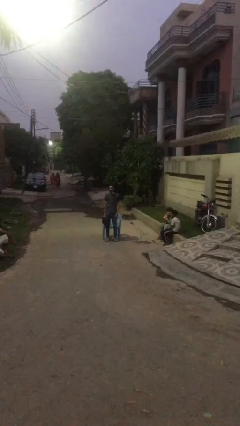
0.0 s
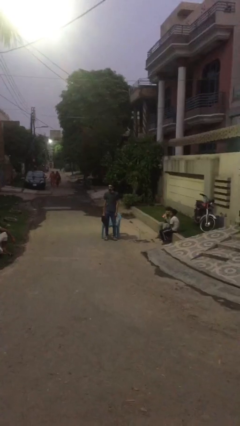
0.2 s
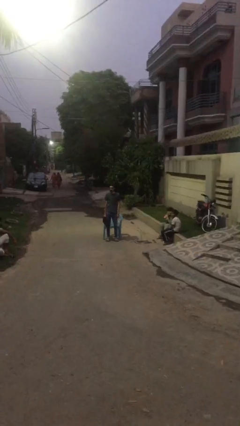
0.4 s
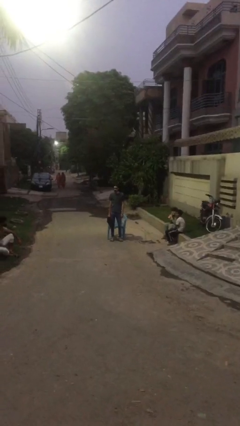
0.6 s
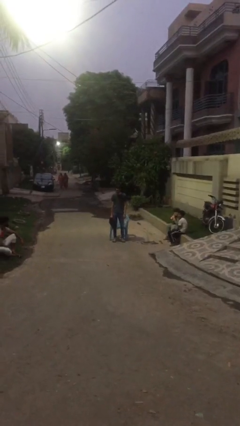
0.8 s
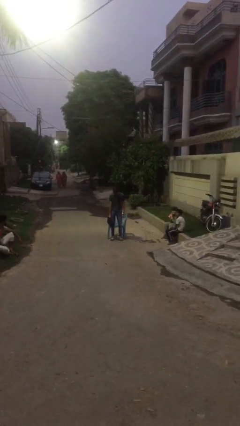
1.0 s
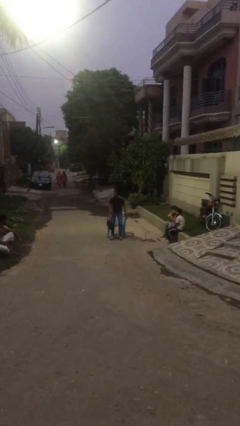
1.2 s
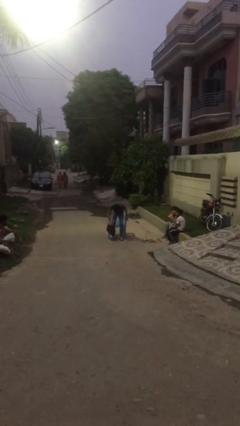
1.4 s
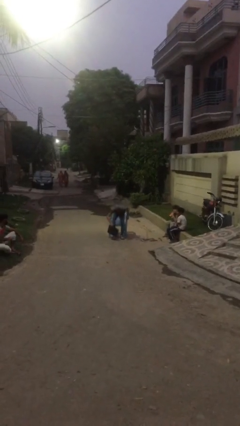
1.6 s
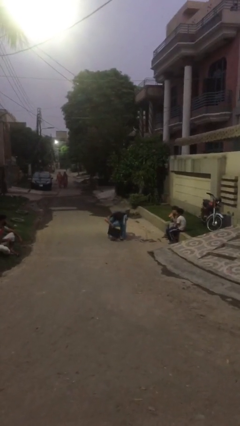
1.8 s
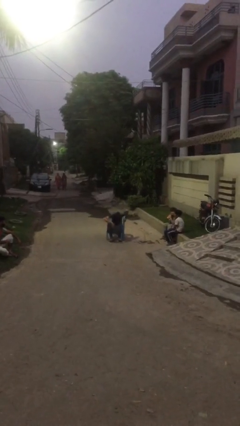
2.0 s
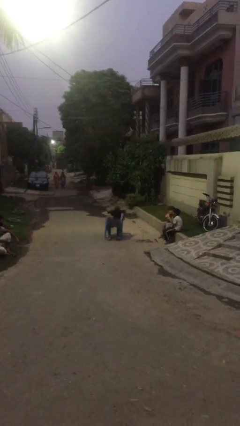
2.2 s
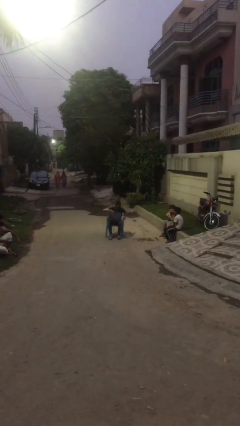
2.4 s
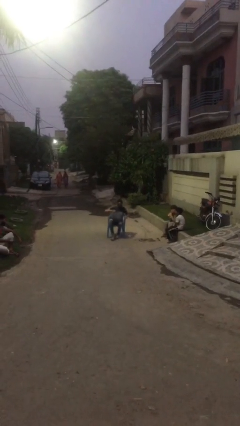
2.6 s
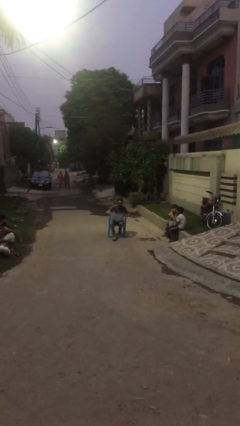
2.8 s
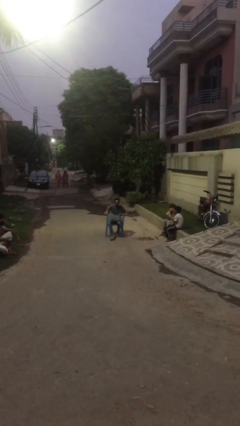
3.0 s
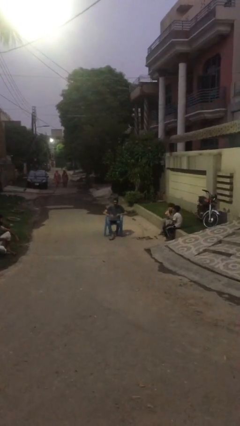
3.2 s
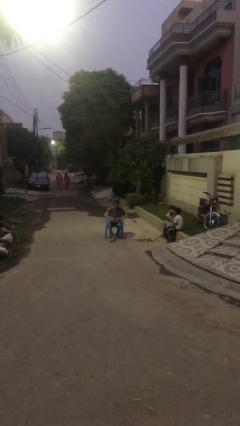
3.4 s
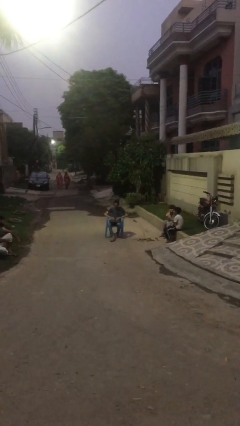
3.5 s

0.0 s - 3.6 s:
person sits down

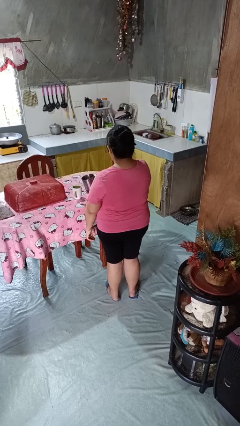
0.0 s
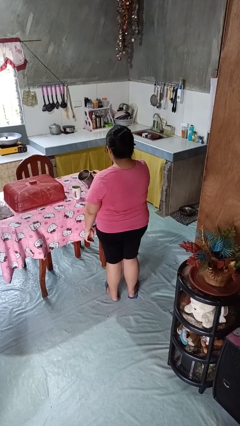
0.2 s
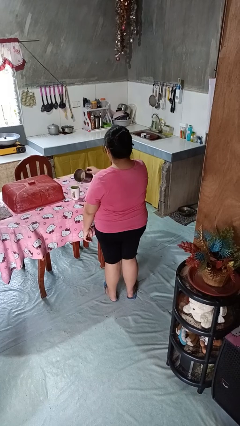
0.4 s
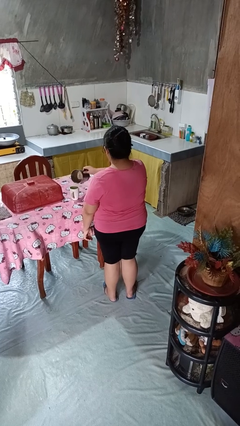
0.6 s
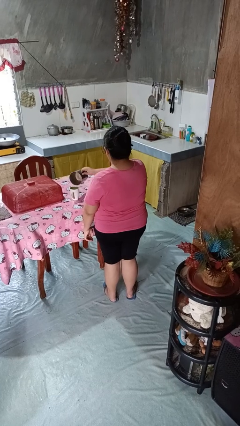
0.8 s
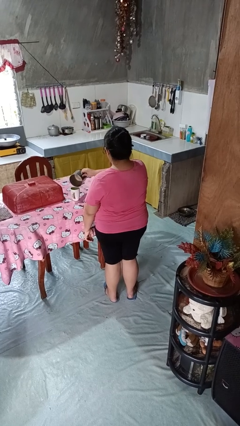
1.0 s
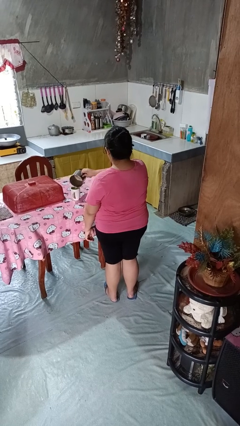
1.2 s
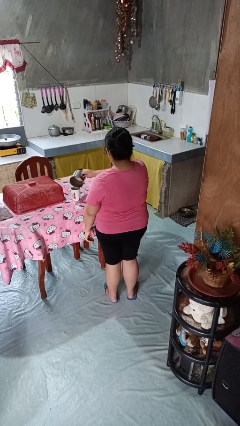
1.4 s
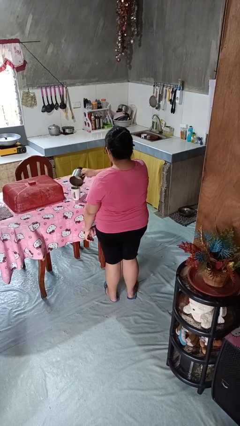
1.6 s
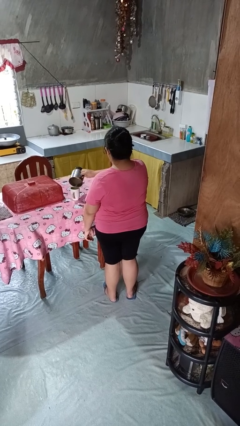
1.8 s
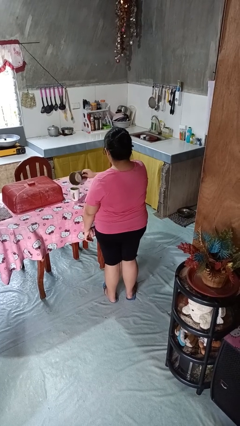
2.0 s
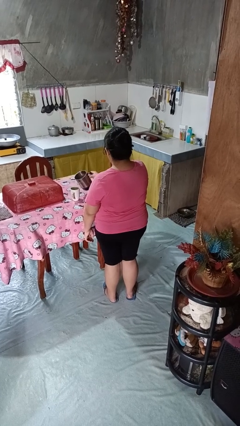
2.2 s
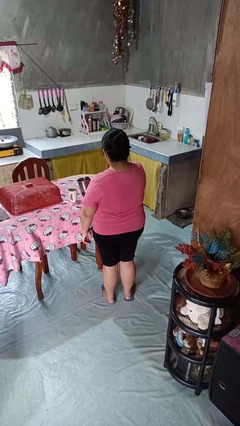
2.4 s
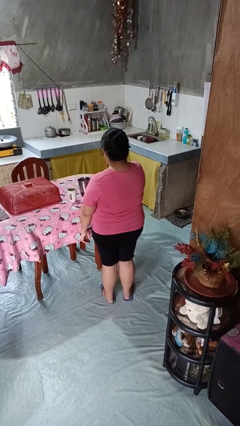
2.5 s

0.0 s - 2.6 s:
person pours coffee into mug

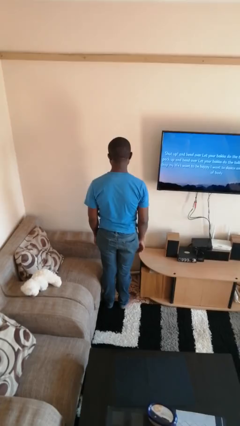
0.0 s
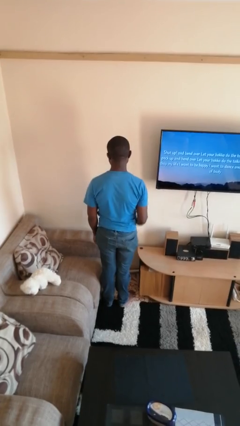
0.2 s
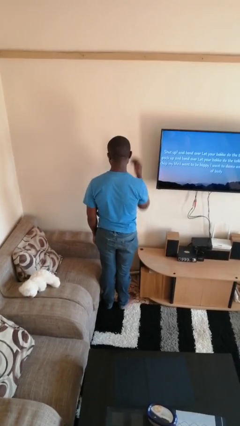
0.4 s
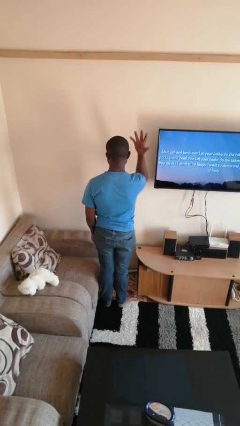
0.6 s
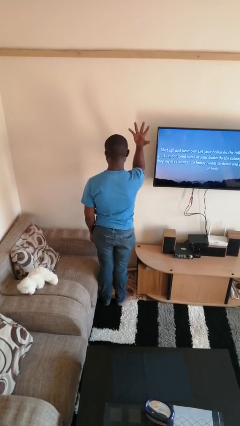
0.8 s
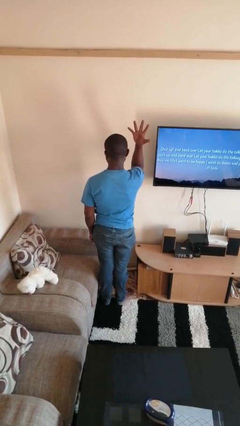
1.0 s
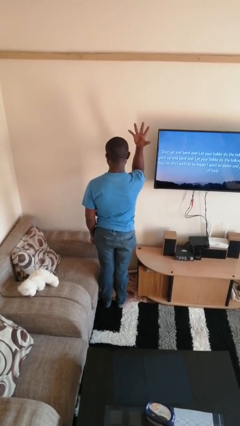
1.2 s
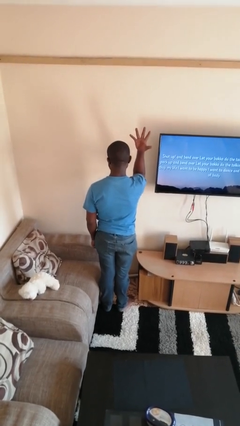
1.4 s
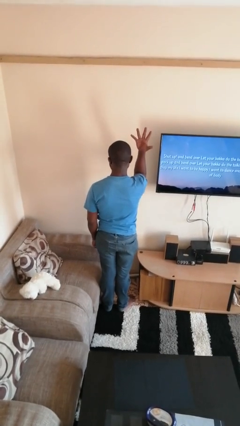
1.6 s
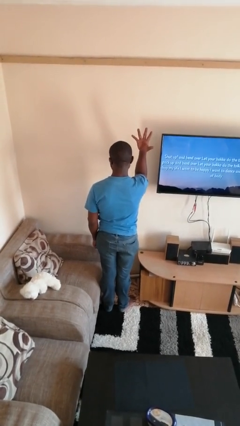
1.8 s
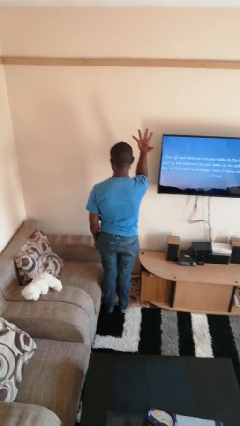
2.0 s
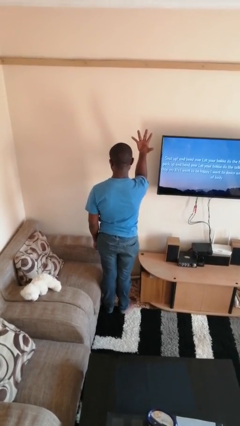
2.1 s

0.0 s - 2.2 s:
person gestures number five

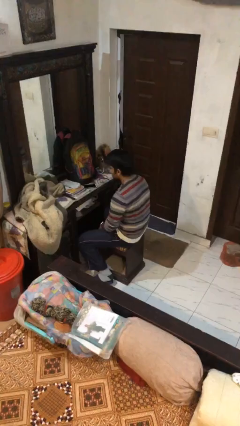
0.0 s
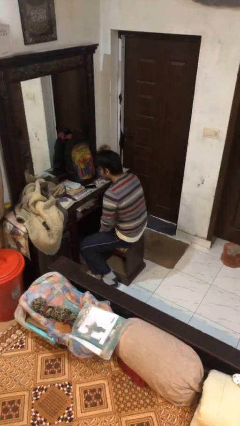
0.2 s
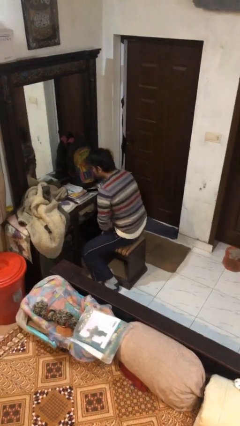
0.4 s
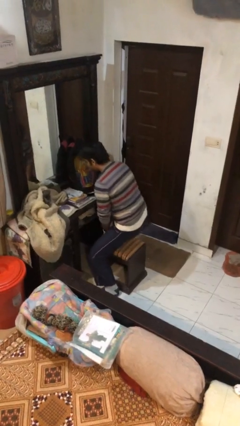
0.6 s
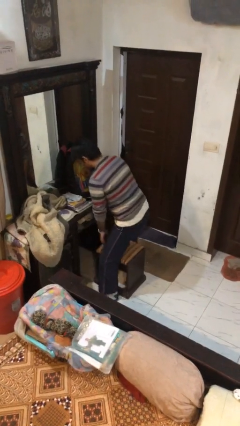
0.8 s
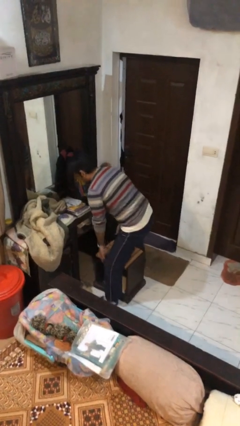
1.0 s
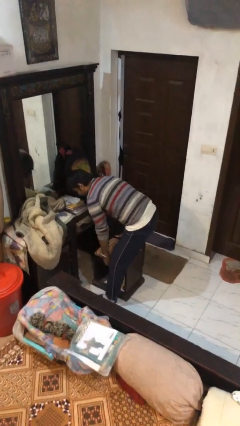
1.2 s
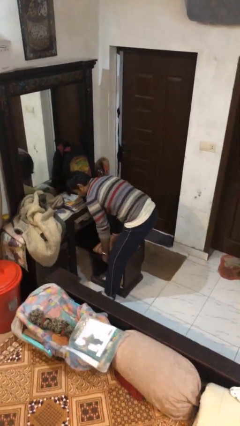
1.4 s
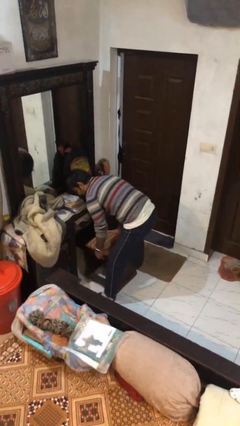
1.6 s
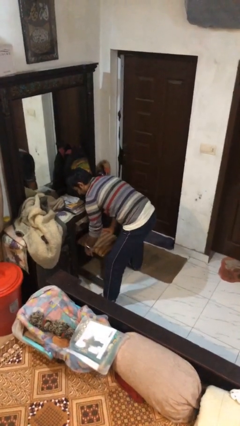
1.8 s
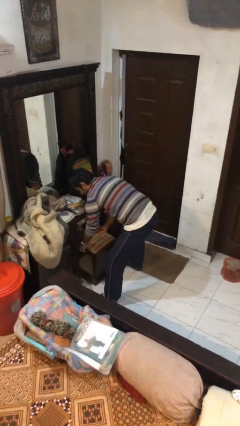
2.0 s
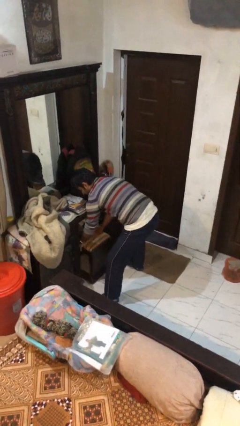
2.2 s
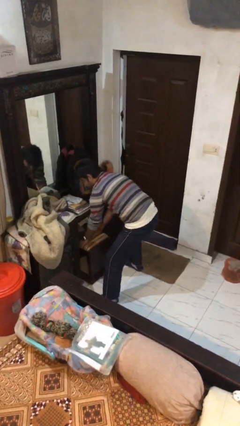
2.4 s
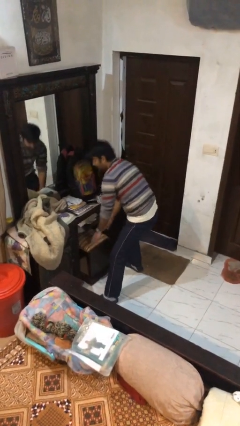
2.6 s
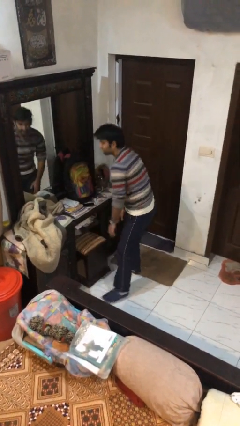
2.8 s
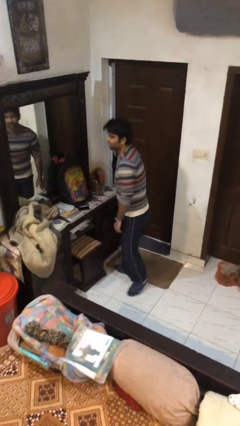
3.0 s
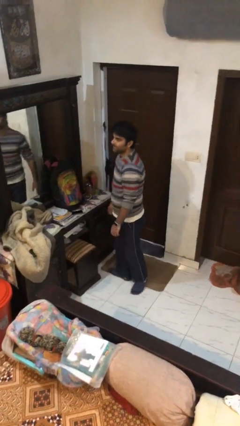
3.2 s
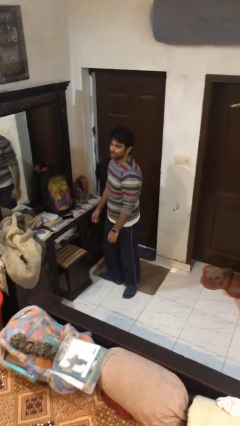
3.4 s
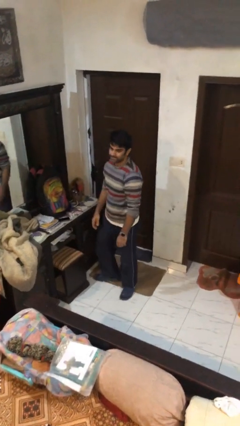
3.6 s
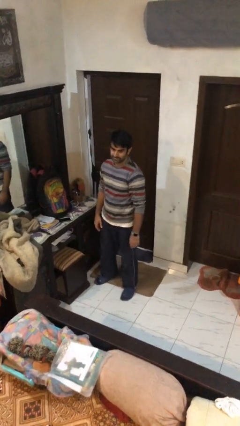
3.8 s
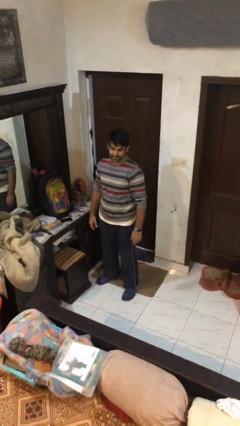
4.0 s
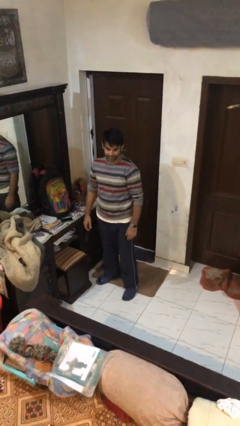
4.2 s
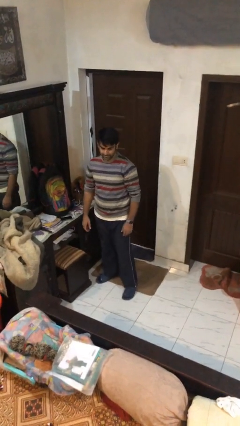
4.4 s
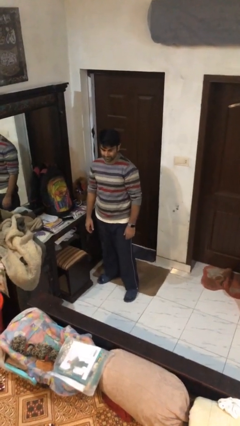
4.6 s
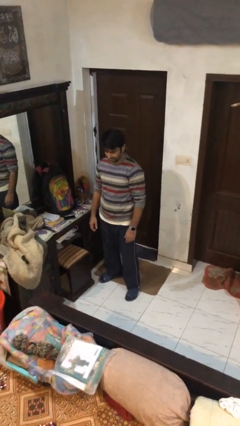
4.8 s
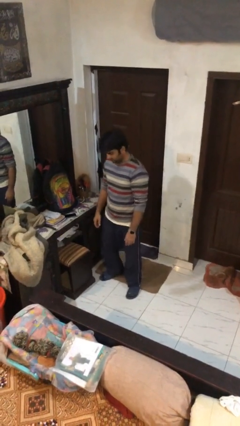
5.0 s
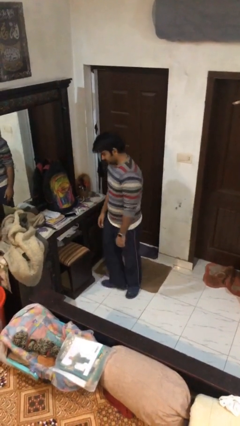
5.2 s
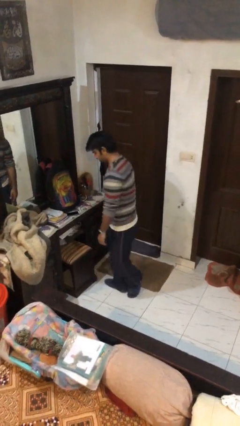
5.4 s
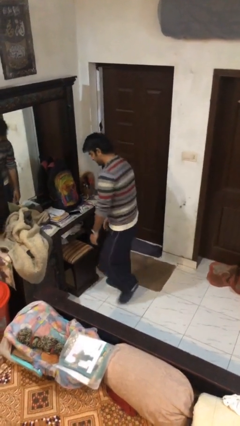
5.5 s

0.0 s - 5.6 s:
person stands up

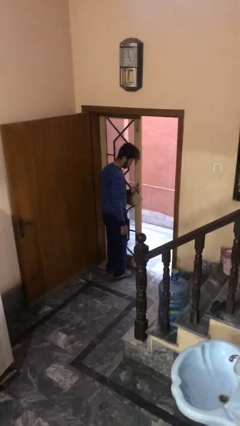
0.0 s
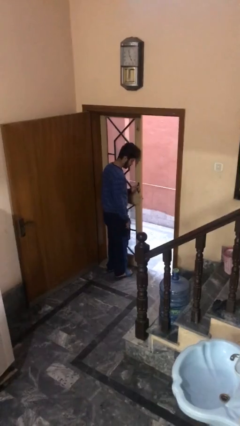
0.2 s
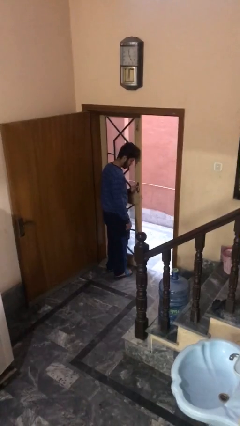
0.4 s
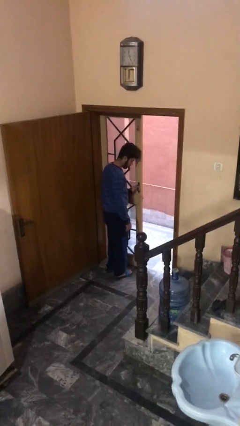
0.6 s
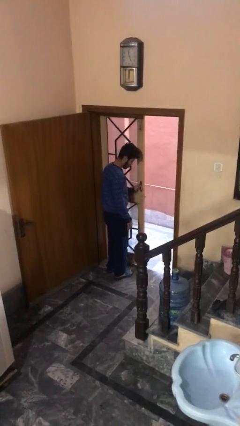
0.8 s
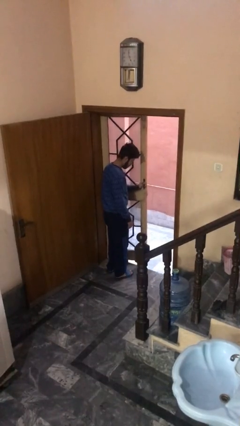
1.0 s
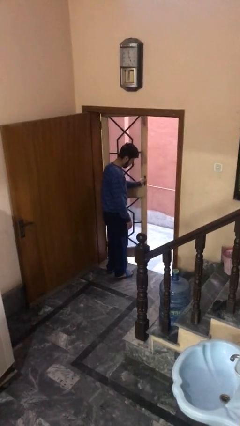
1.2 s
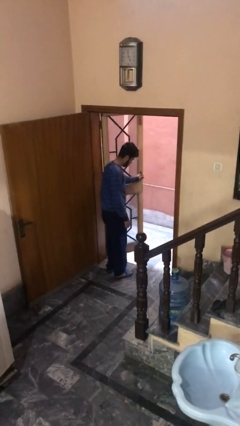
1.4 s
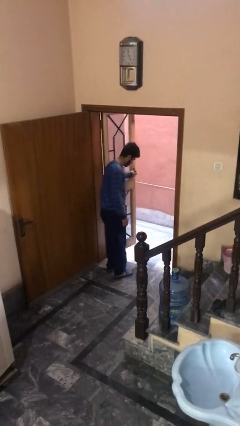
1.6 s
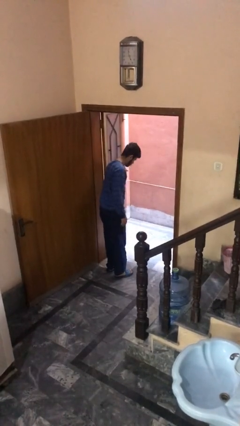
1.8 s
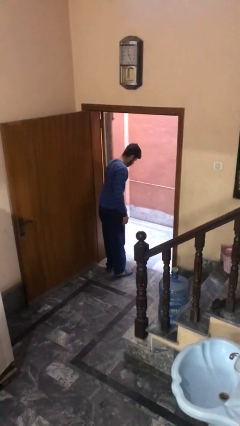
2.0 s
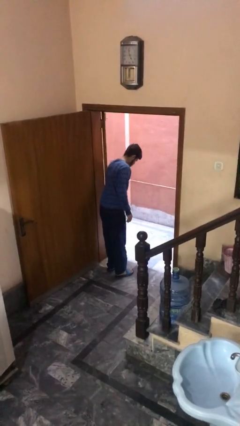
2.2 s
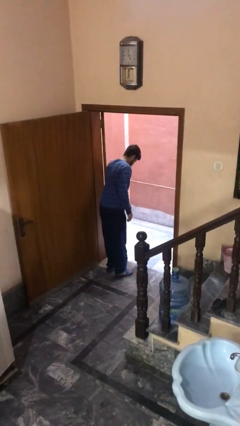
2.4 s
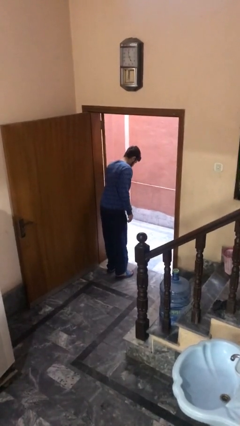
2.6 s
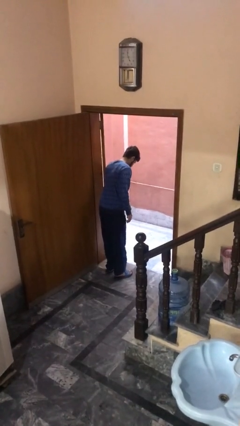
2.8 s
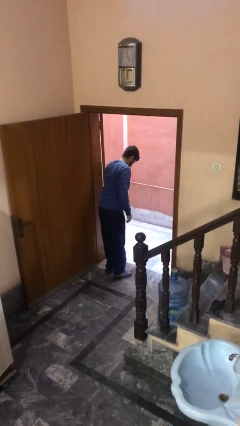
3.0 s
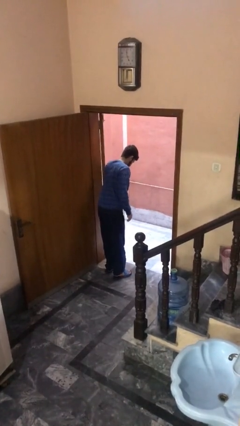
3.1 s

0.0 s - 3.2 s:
person opens facility door

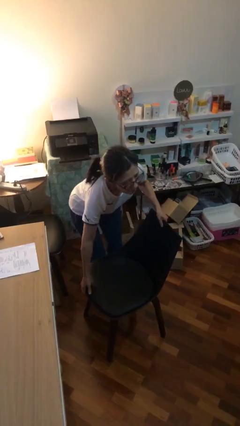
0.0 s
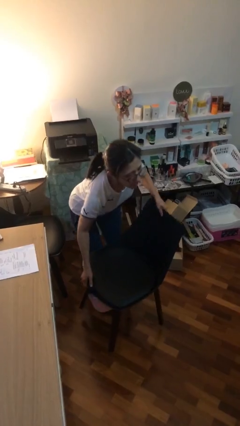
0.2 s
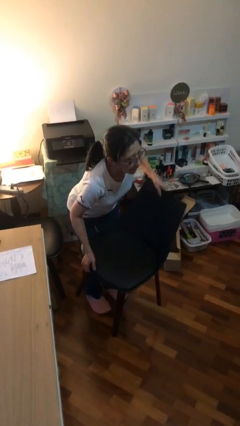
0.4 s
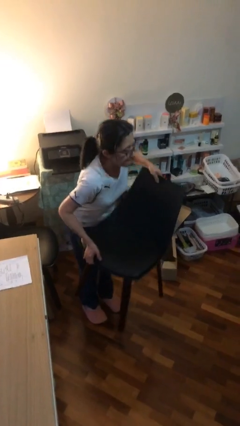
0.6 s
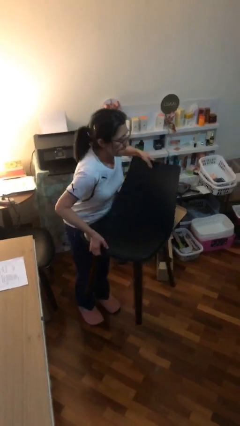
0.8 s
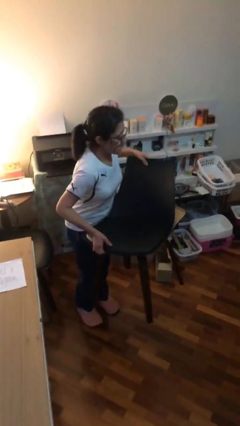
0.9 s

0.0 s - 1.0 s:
person picks up object from floor
